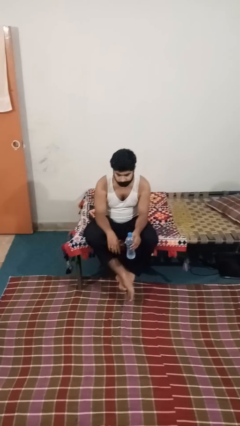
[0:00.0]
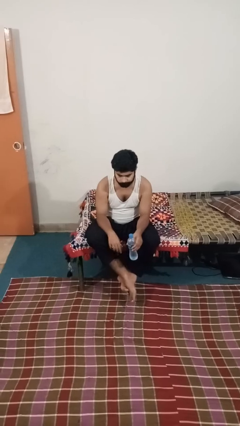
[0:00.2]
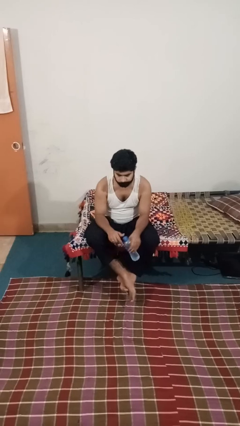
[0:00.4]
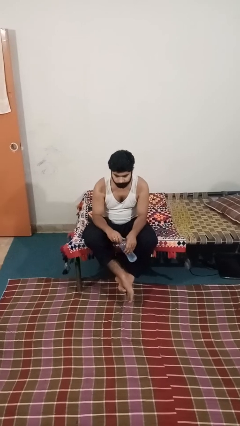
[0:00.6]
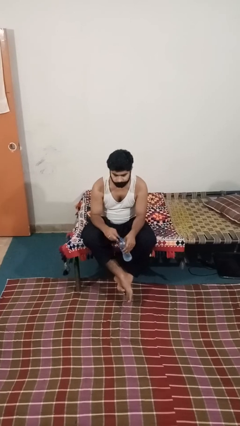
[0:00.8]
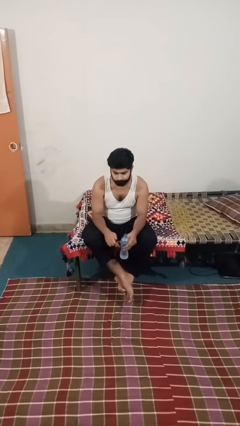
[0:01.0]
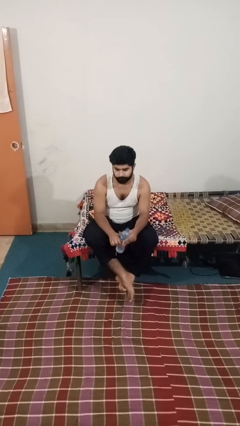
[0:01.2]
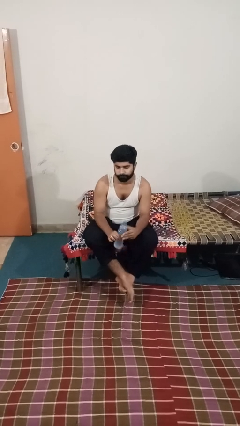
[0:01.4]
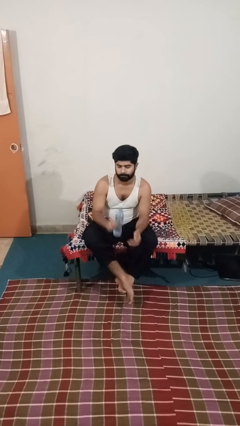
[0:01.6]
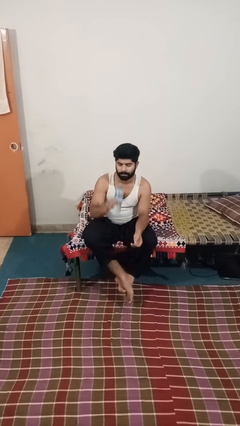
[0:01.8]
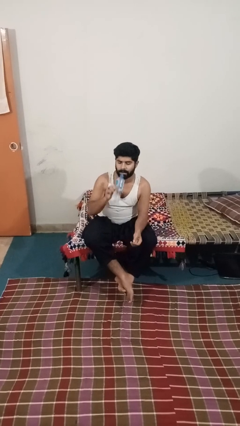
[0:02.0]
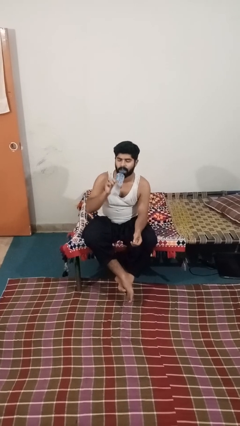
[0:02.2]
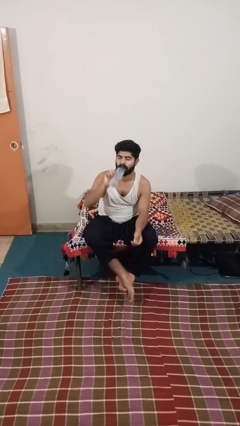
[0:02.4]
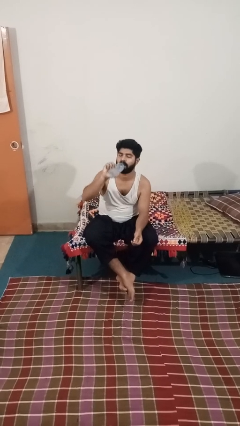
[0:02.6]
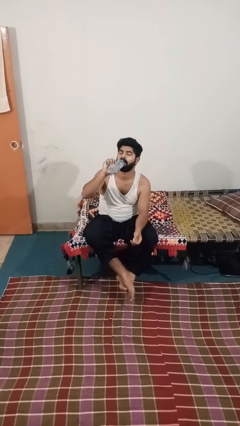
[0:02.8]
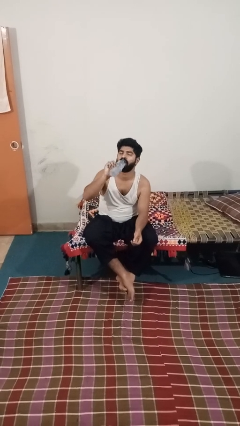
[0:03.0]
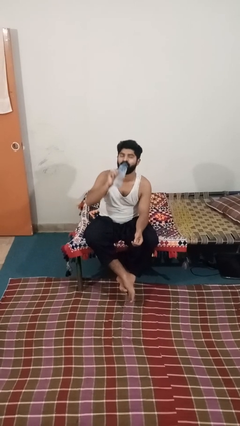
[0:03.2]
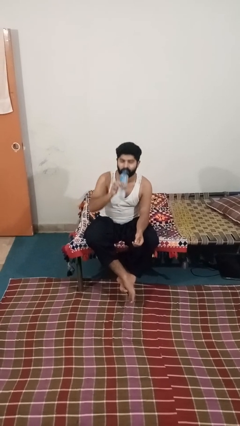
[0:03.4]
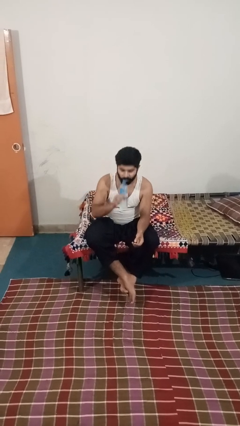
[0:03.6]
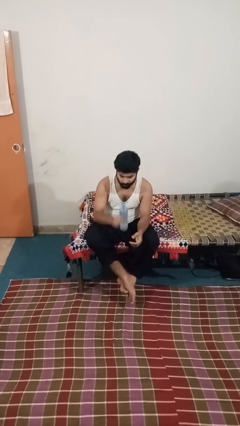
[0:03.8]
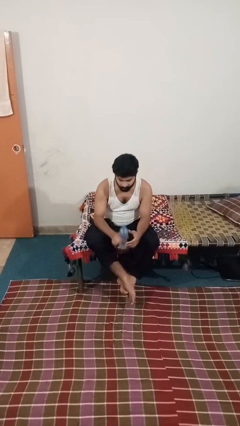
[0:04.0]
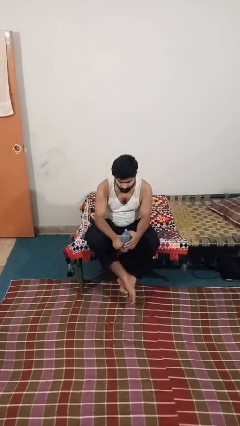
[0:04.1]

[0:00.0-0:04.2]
person drinks from bottle

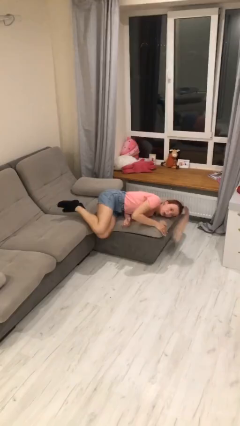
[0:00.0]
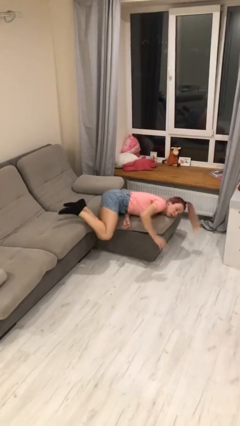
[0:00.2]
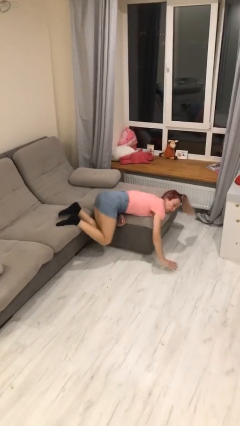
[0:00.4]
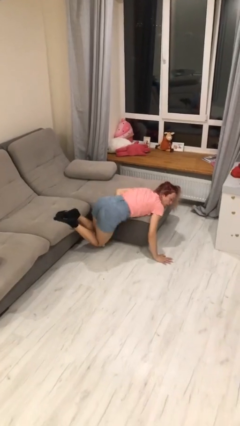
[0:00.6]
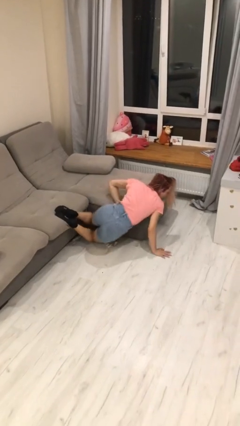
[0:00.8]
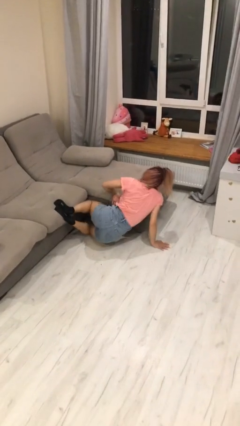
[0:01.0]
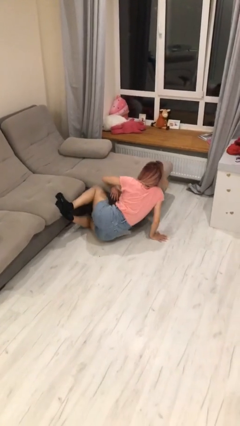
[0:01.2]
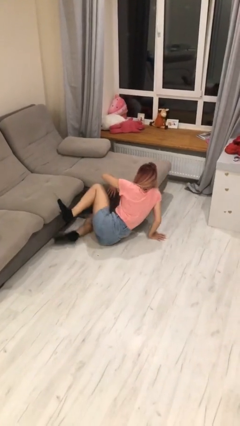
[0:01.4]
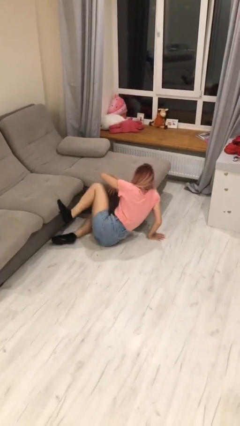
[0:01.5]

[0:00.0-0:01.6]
person falls from bed

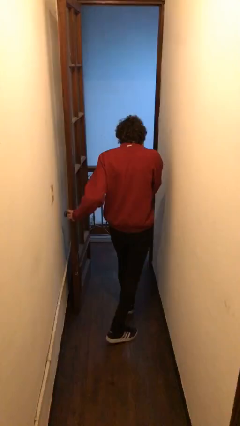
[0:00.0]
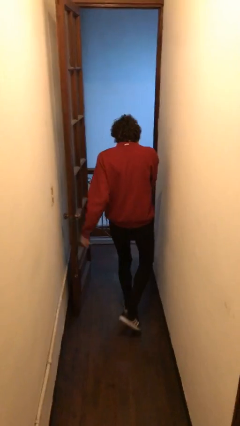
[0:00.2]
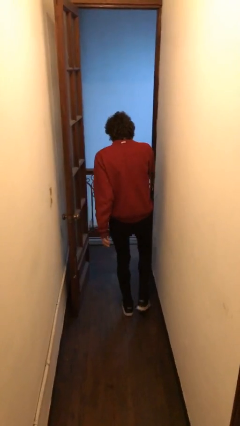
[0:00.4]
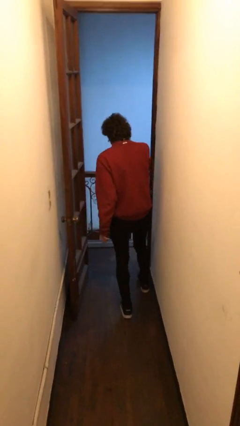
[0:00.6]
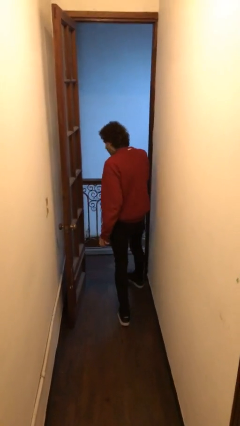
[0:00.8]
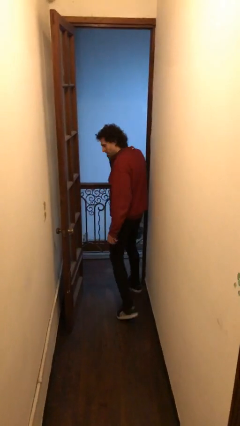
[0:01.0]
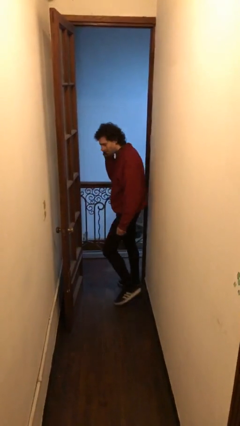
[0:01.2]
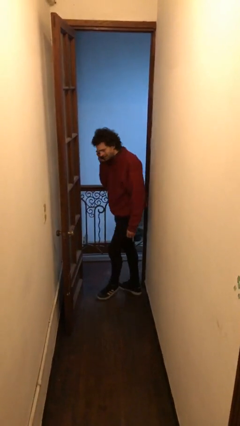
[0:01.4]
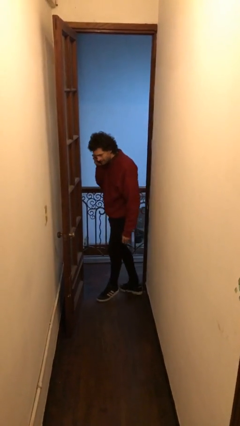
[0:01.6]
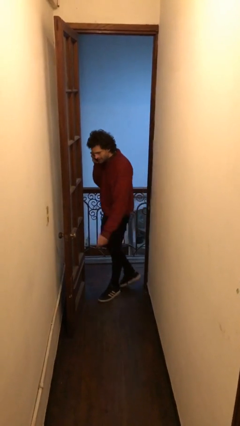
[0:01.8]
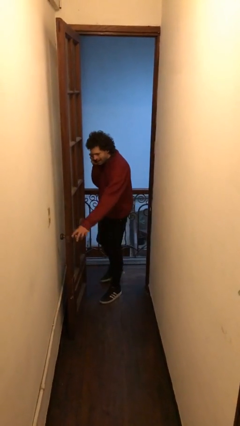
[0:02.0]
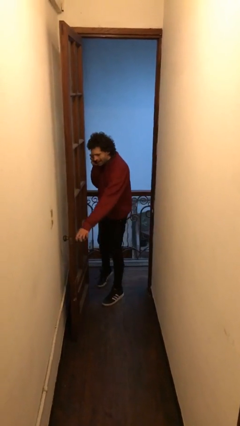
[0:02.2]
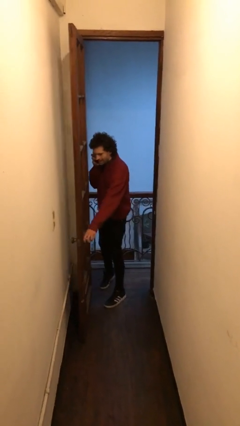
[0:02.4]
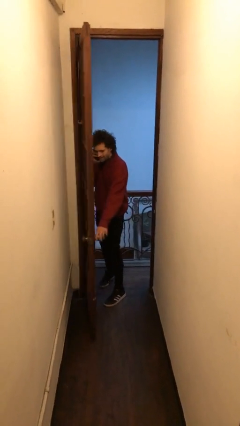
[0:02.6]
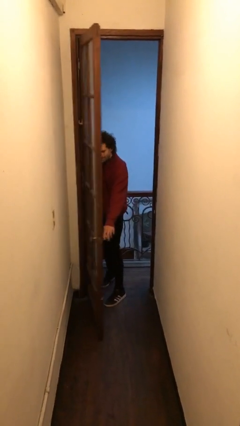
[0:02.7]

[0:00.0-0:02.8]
person exits scene through structure

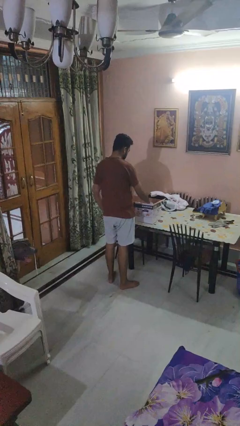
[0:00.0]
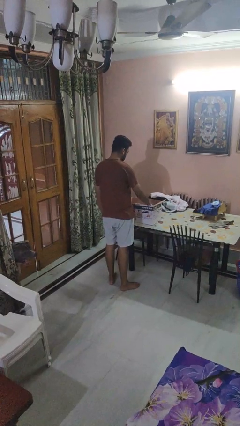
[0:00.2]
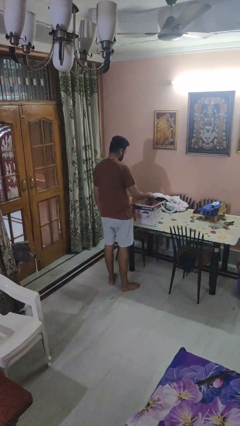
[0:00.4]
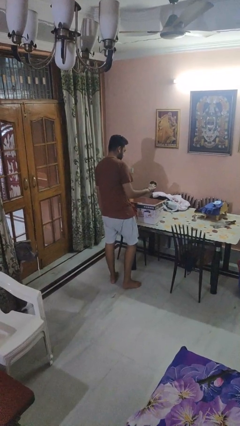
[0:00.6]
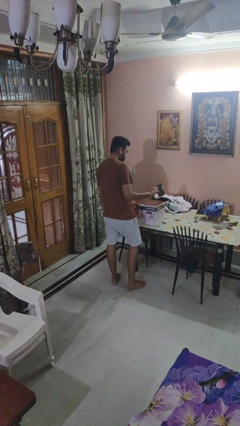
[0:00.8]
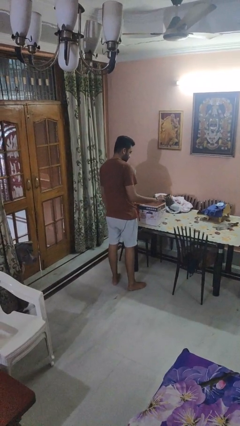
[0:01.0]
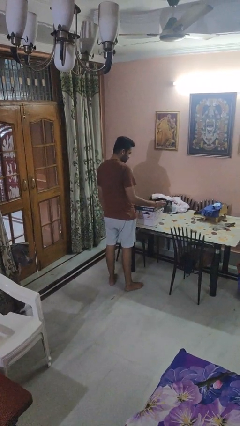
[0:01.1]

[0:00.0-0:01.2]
person takes object from box

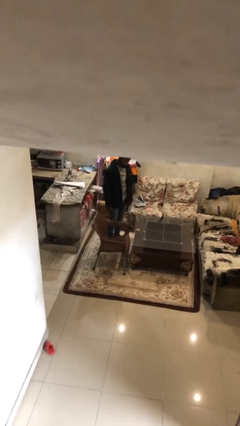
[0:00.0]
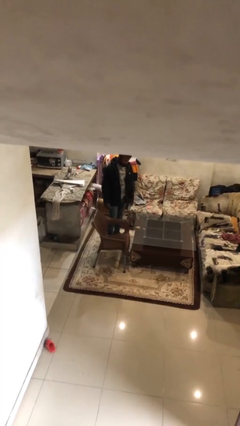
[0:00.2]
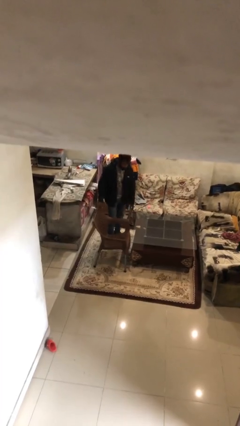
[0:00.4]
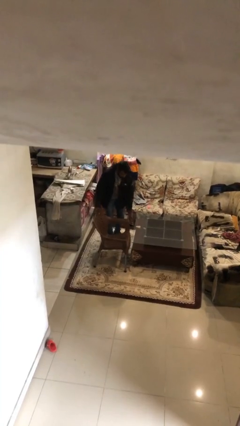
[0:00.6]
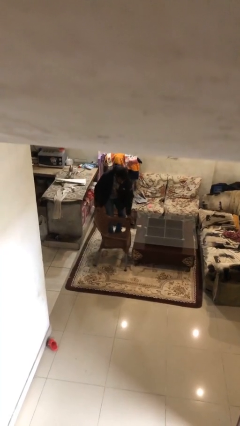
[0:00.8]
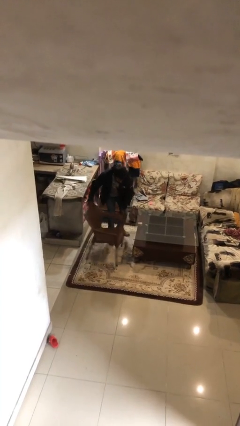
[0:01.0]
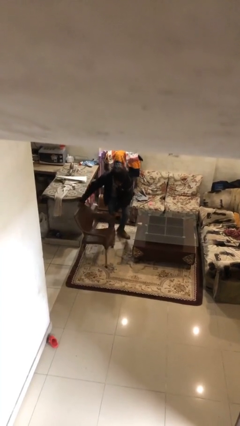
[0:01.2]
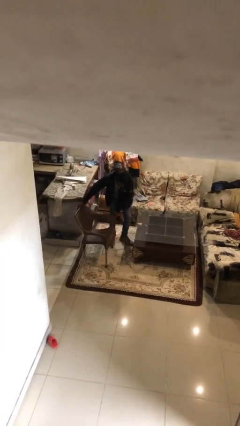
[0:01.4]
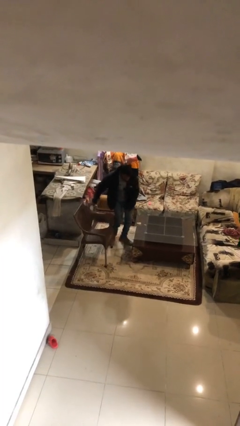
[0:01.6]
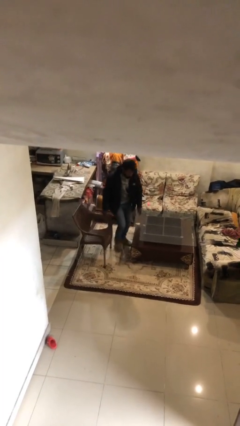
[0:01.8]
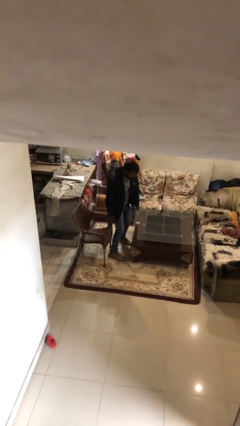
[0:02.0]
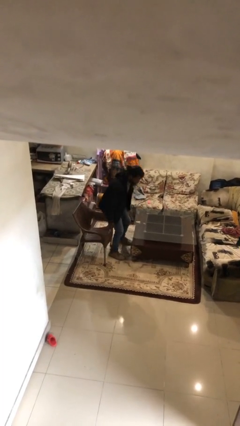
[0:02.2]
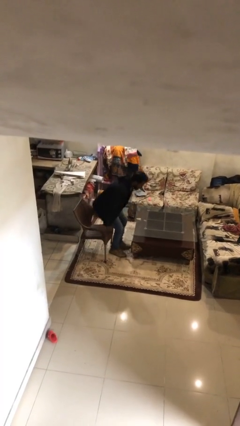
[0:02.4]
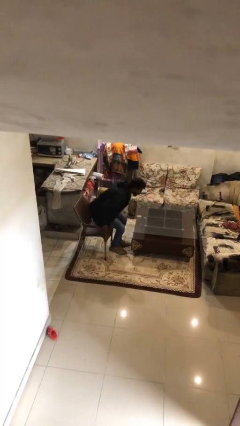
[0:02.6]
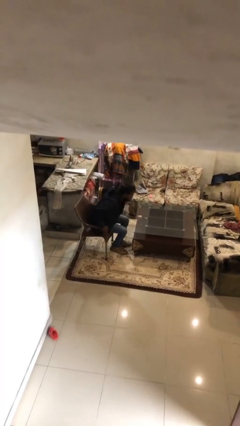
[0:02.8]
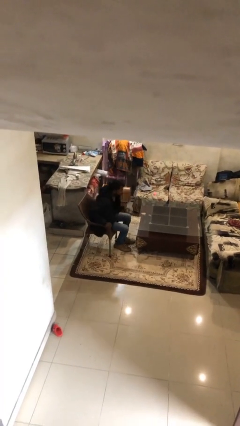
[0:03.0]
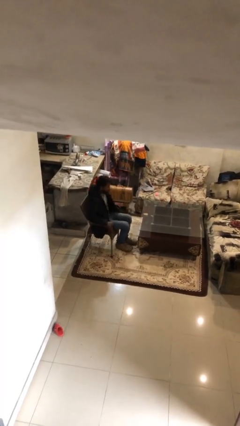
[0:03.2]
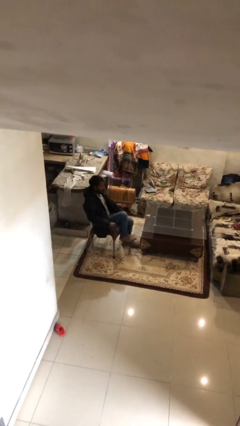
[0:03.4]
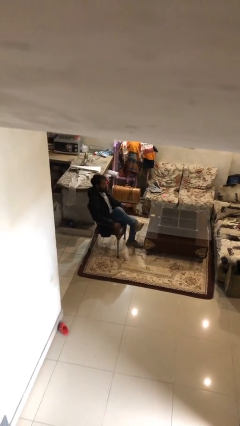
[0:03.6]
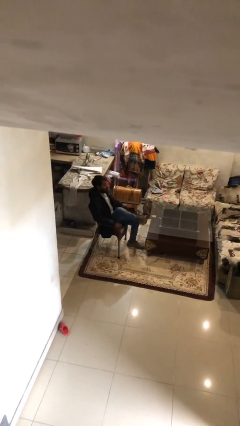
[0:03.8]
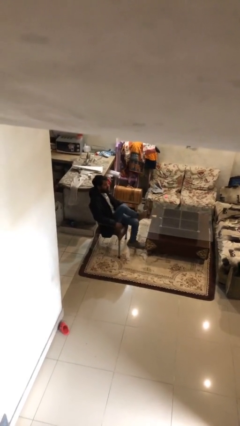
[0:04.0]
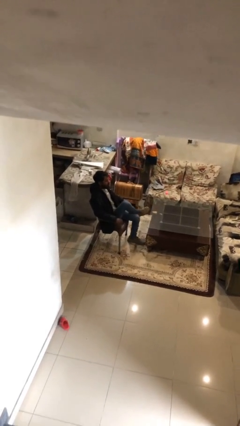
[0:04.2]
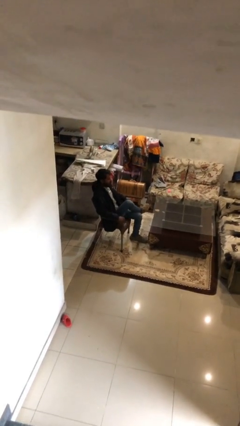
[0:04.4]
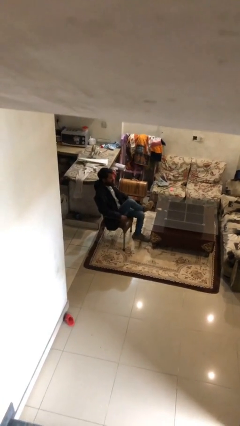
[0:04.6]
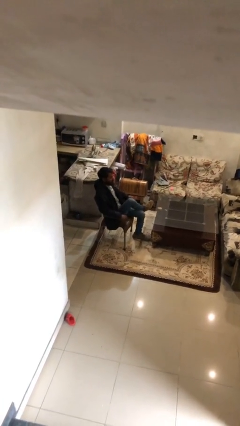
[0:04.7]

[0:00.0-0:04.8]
person sits down

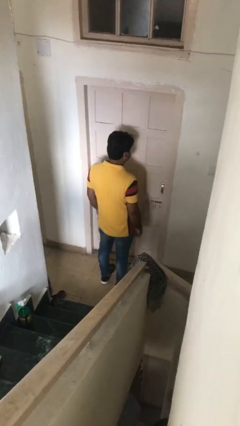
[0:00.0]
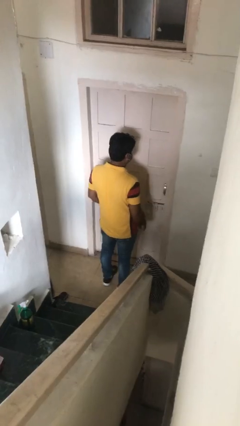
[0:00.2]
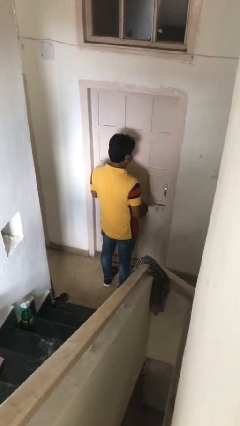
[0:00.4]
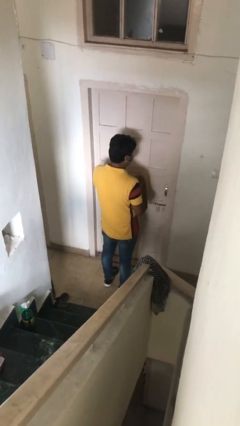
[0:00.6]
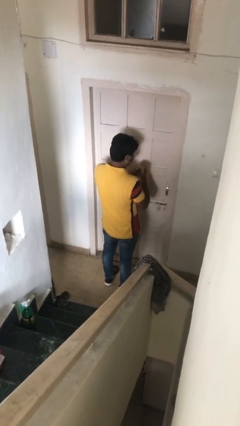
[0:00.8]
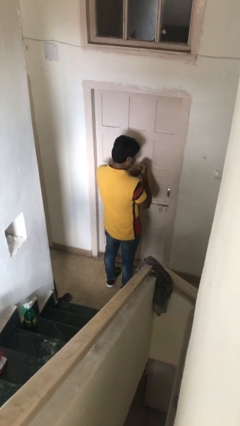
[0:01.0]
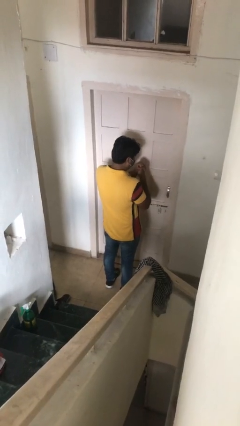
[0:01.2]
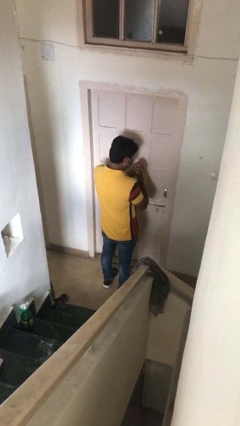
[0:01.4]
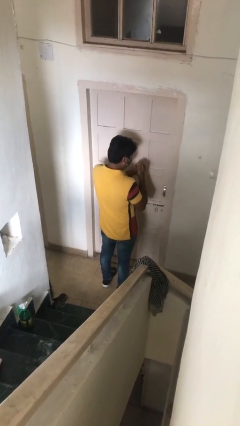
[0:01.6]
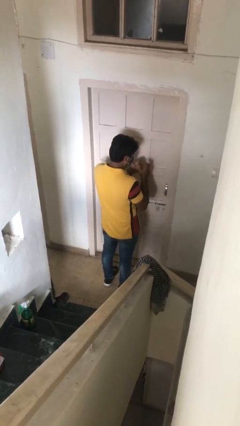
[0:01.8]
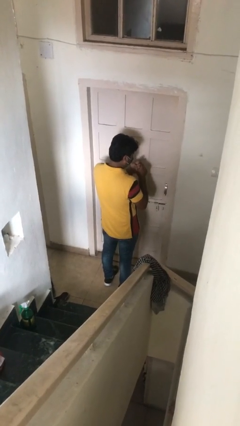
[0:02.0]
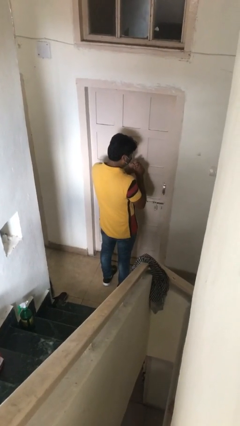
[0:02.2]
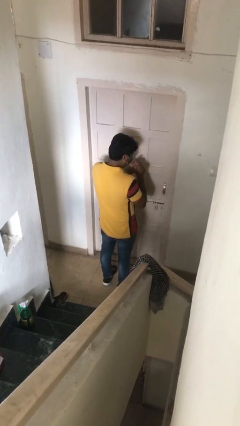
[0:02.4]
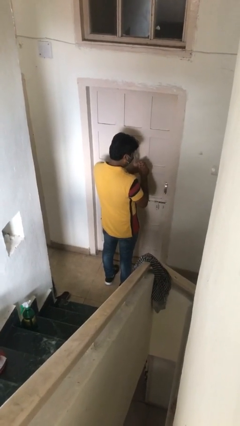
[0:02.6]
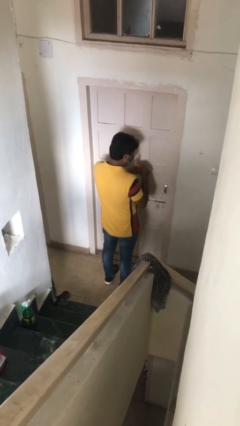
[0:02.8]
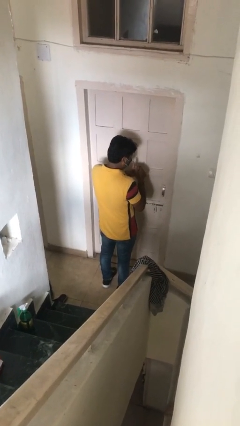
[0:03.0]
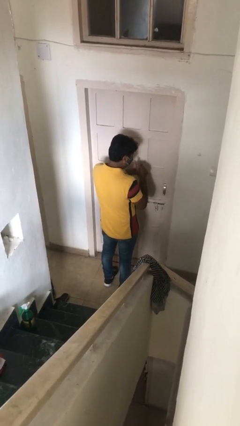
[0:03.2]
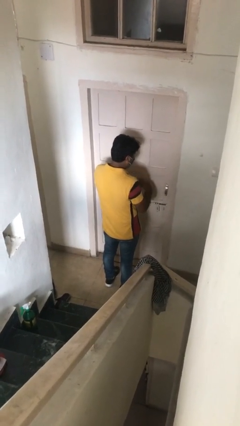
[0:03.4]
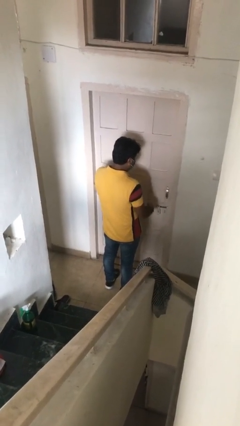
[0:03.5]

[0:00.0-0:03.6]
person cracks knuckles
